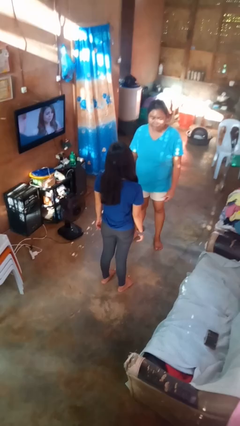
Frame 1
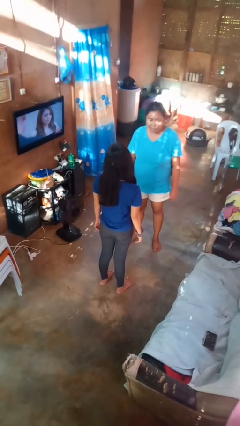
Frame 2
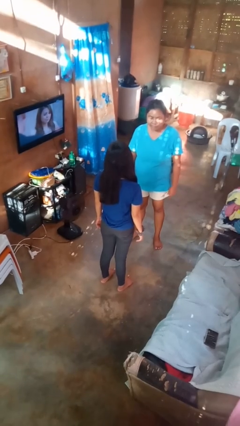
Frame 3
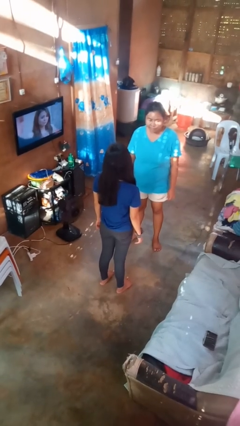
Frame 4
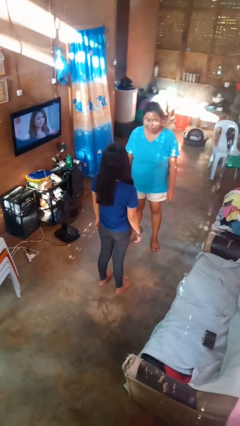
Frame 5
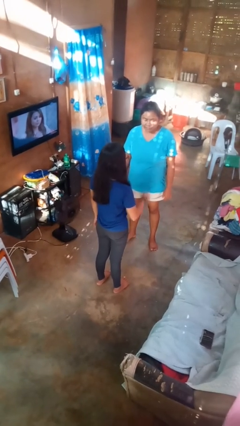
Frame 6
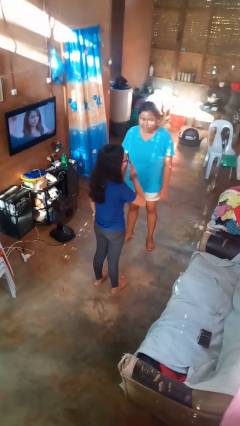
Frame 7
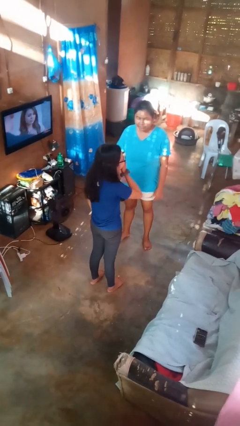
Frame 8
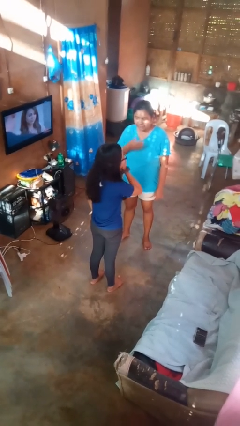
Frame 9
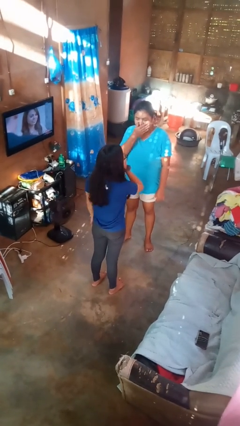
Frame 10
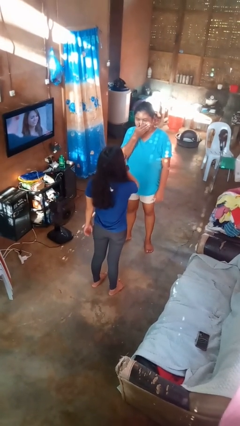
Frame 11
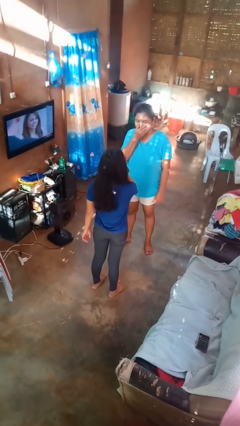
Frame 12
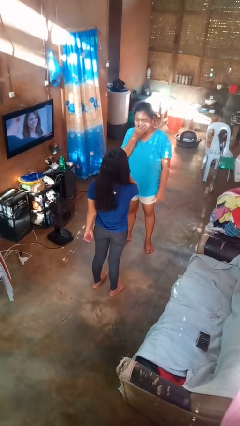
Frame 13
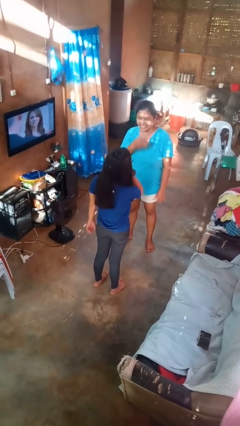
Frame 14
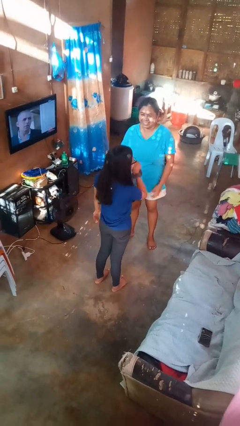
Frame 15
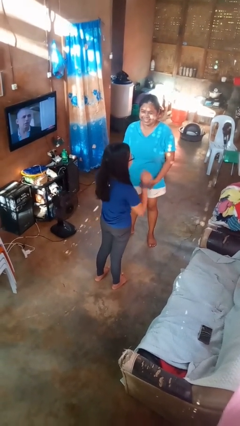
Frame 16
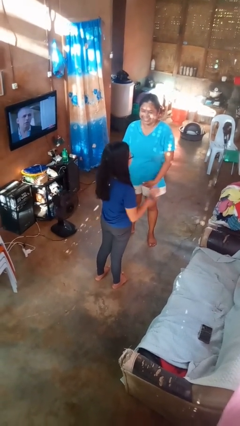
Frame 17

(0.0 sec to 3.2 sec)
person laughs with person

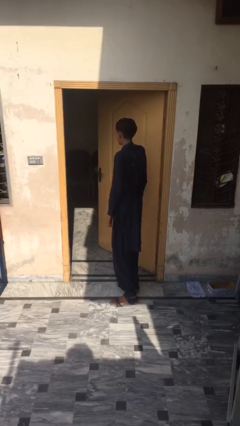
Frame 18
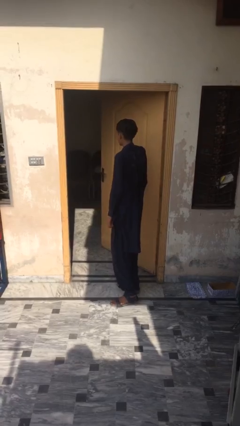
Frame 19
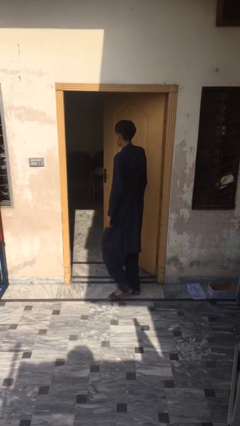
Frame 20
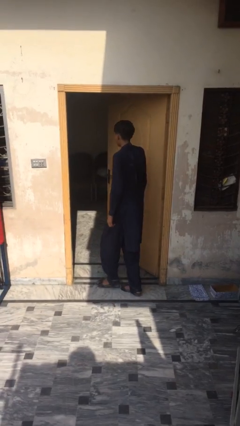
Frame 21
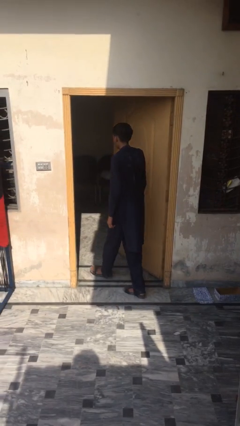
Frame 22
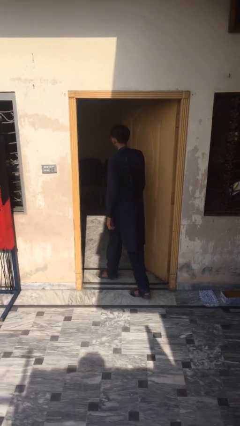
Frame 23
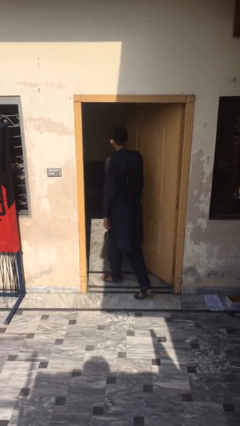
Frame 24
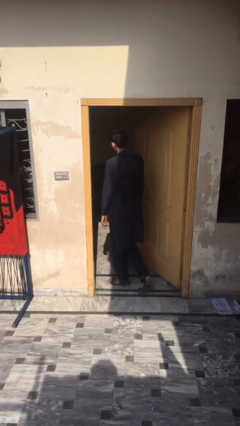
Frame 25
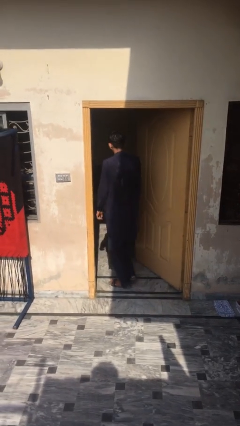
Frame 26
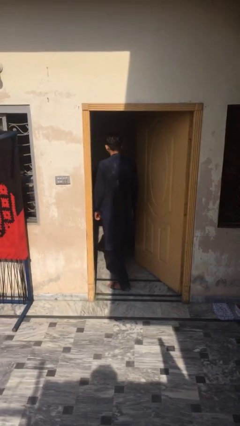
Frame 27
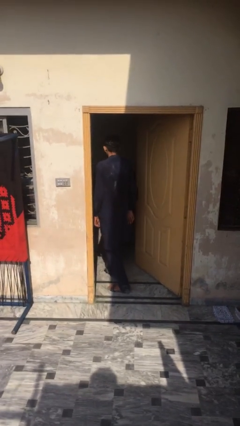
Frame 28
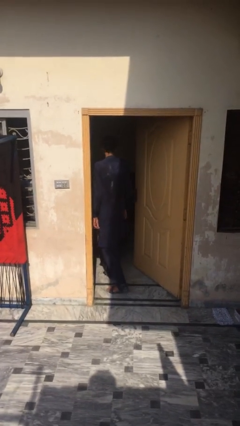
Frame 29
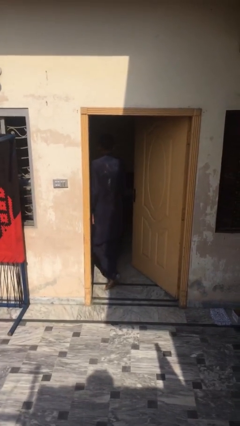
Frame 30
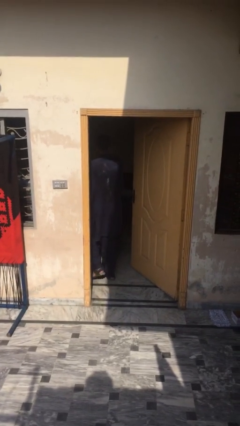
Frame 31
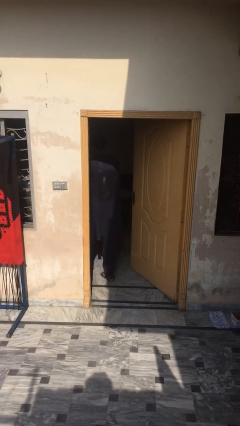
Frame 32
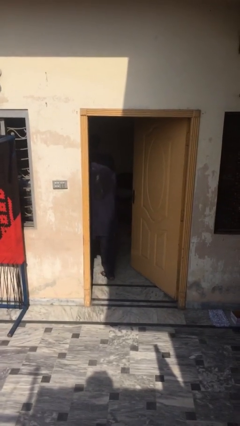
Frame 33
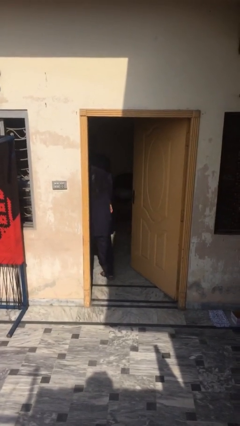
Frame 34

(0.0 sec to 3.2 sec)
person exits scene through structure

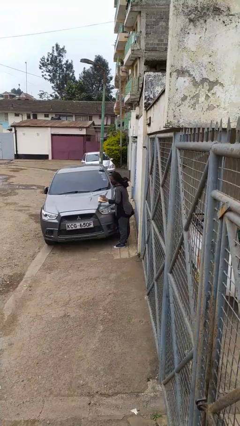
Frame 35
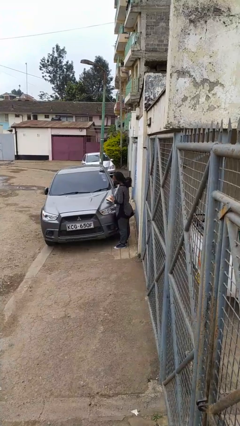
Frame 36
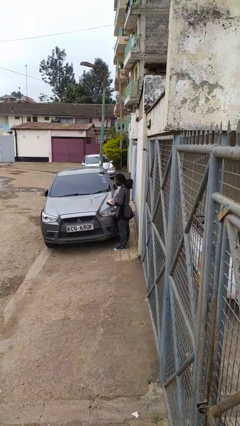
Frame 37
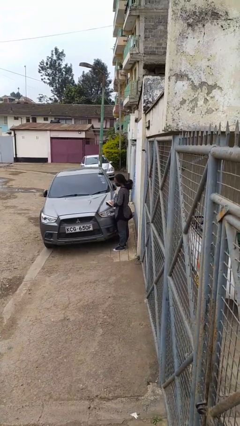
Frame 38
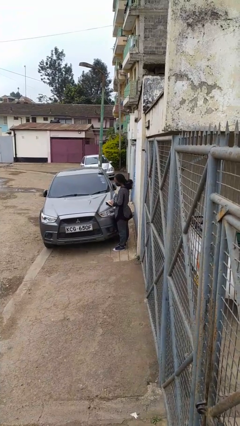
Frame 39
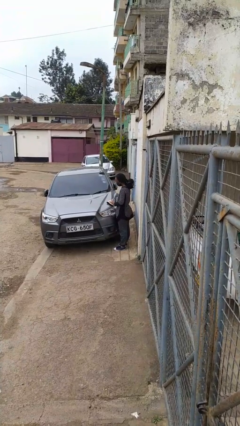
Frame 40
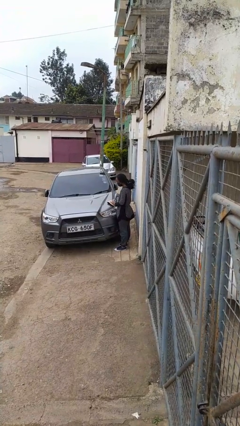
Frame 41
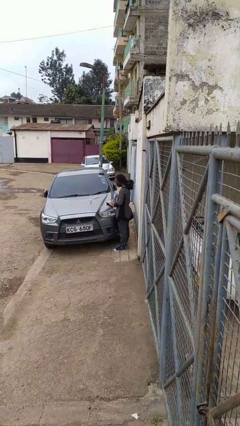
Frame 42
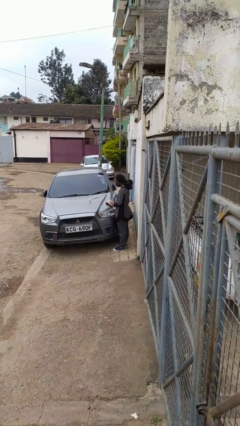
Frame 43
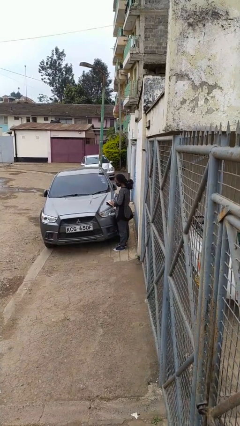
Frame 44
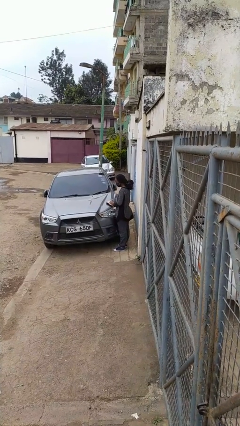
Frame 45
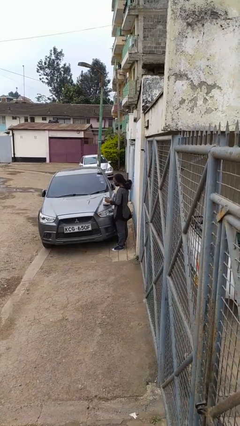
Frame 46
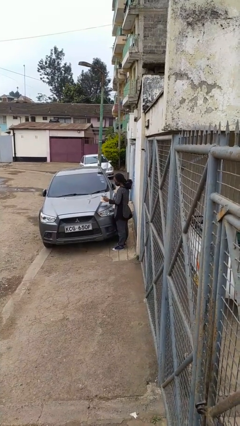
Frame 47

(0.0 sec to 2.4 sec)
person polishes car with rag

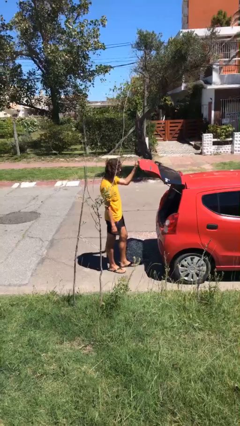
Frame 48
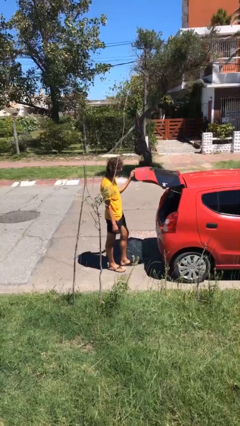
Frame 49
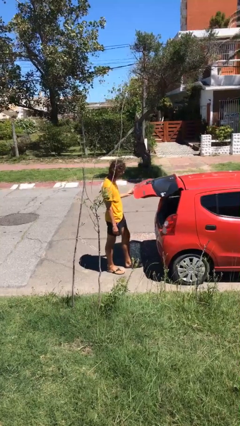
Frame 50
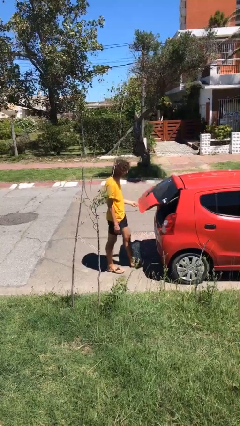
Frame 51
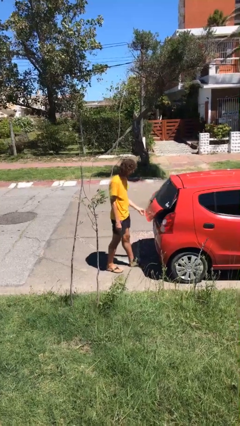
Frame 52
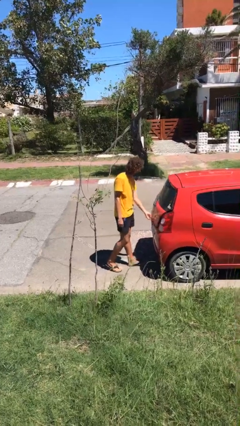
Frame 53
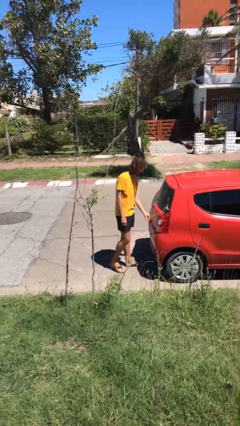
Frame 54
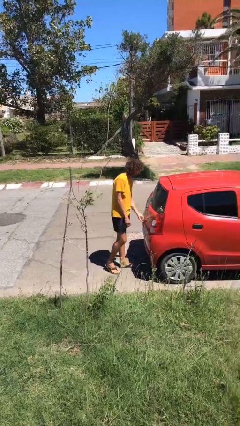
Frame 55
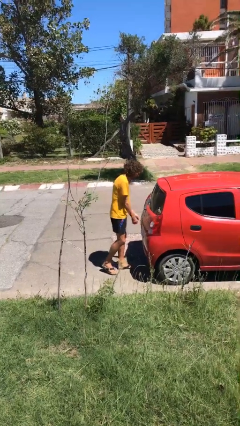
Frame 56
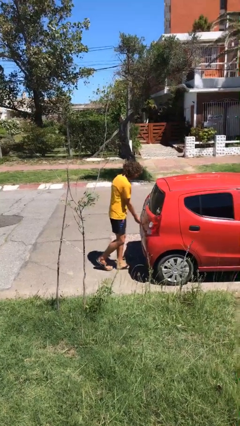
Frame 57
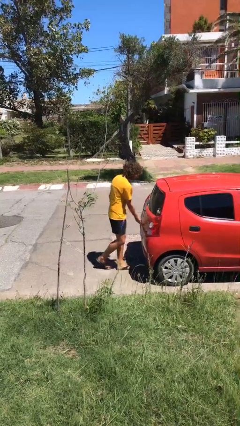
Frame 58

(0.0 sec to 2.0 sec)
person closes car trunk

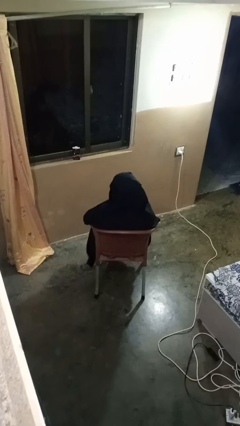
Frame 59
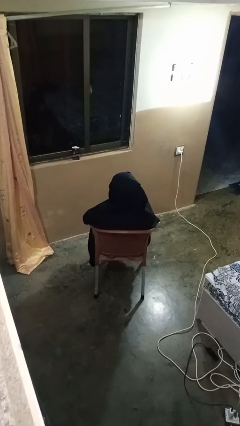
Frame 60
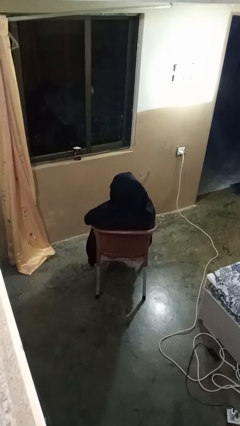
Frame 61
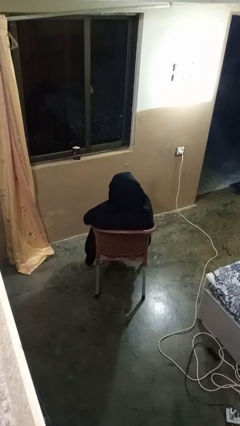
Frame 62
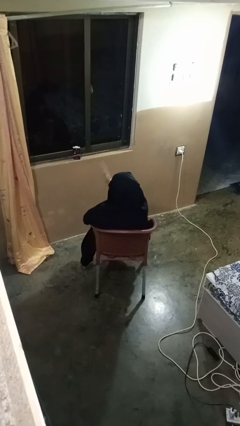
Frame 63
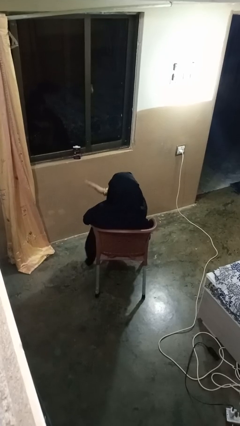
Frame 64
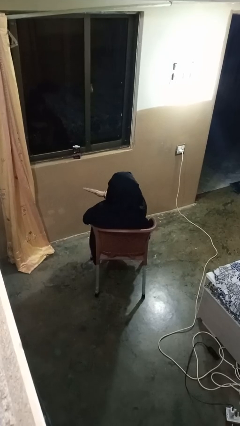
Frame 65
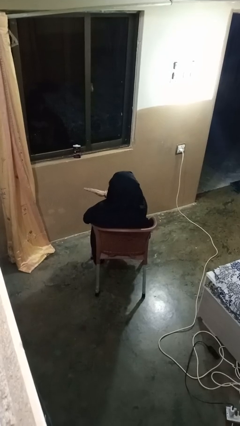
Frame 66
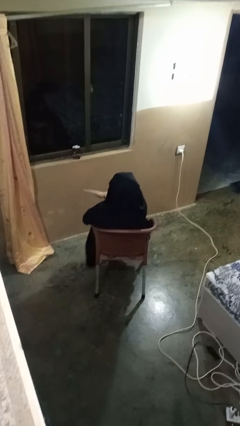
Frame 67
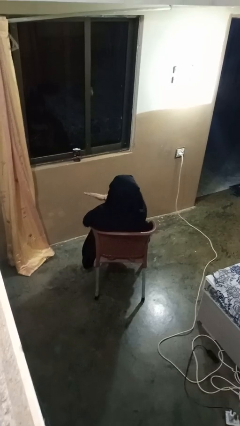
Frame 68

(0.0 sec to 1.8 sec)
person gestures swipe left

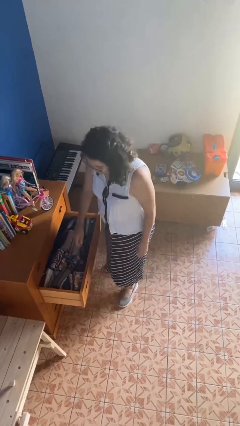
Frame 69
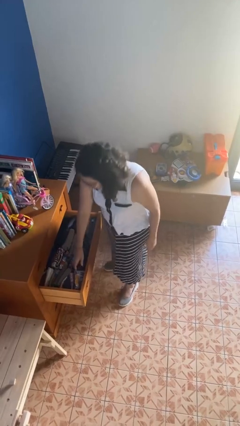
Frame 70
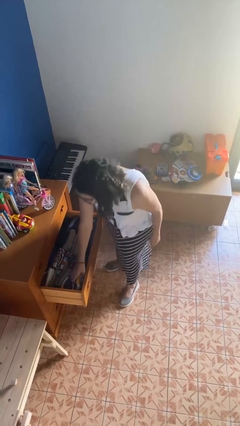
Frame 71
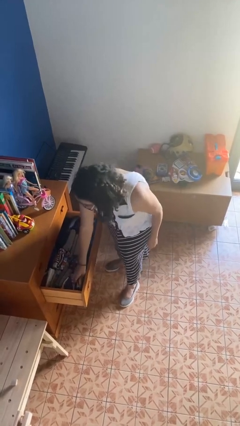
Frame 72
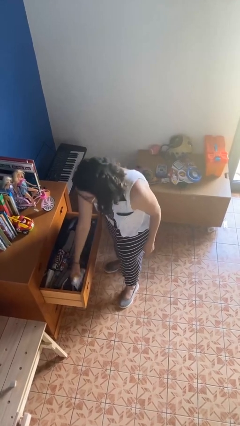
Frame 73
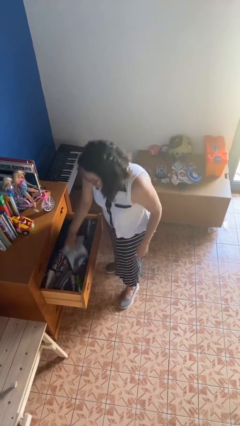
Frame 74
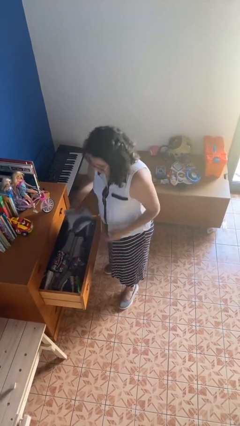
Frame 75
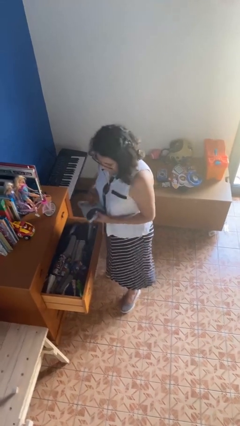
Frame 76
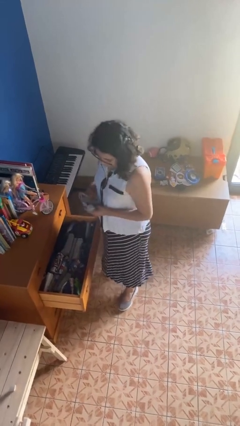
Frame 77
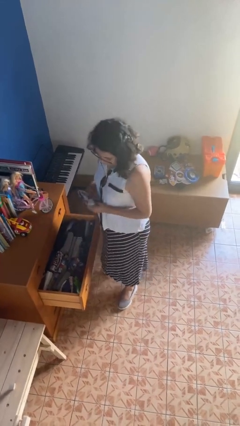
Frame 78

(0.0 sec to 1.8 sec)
person takes clothes from dresser

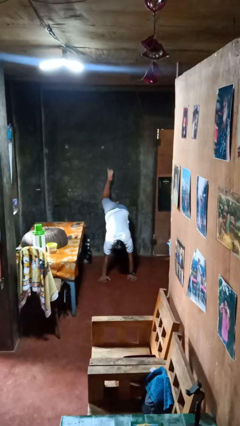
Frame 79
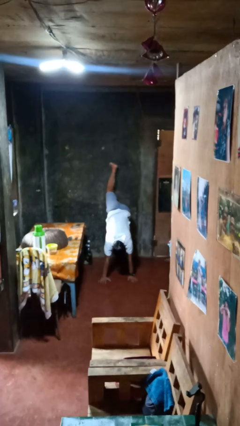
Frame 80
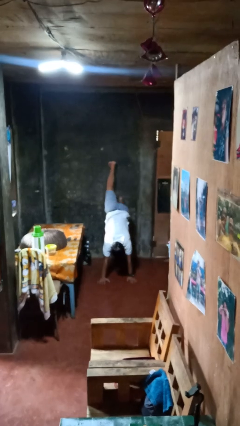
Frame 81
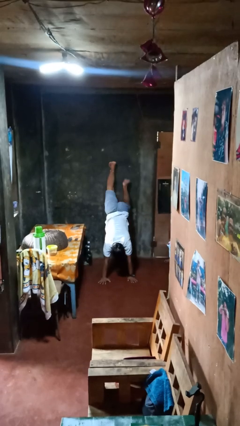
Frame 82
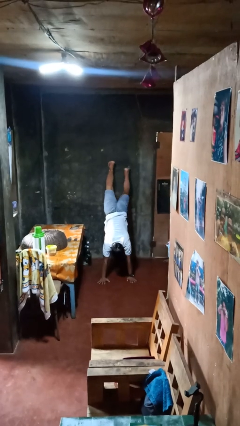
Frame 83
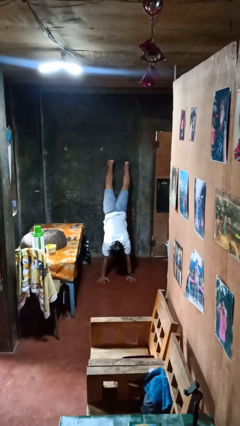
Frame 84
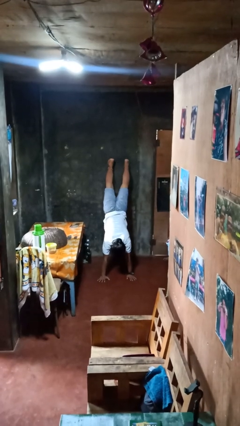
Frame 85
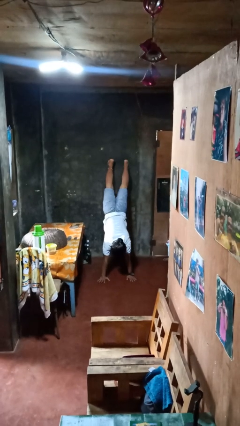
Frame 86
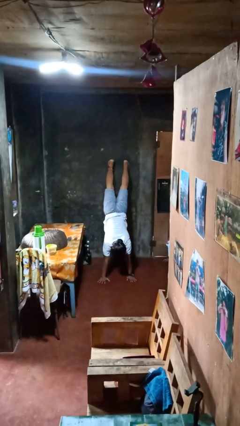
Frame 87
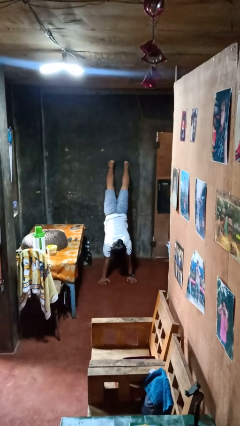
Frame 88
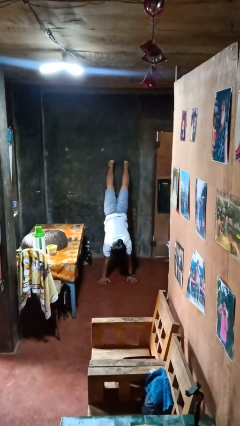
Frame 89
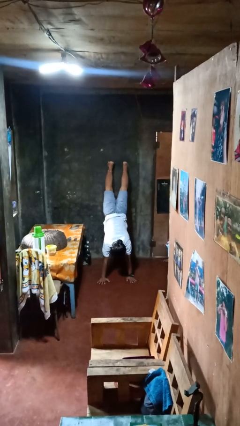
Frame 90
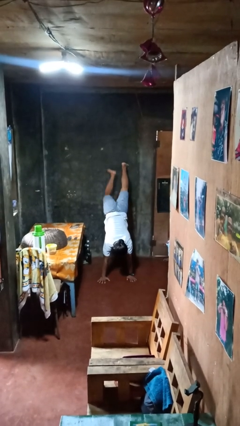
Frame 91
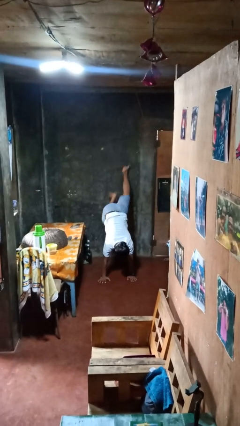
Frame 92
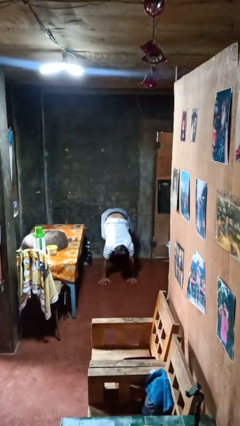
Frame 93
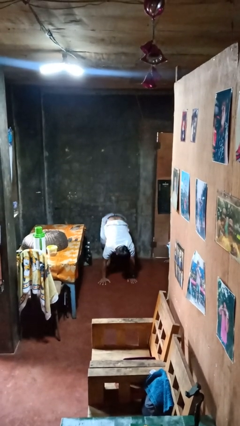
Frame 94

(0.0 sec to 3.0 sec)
person handstand
